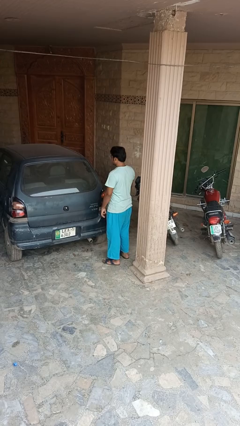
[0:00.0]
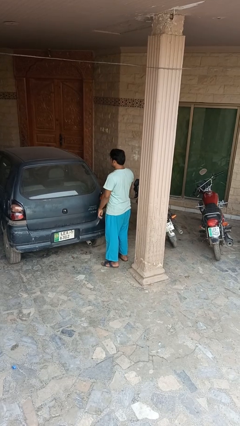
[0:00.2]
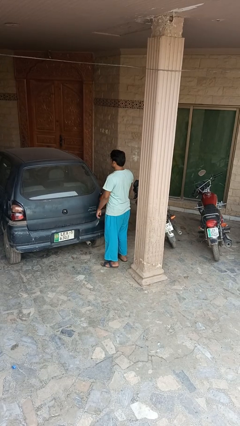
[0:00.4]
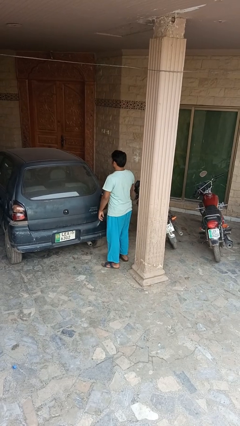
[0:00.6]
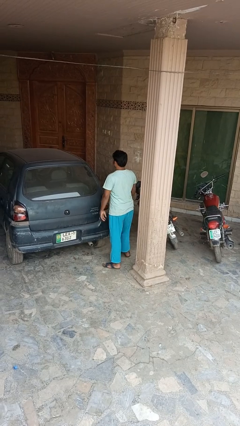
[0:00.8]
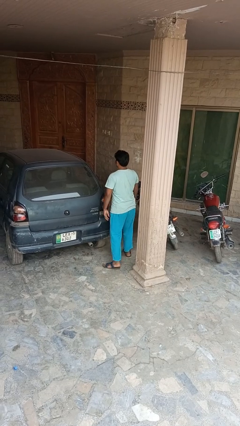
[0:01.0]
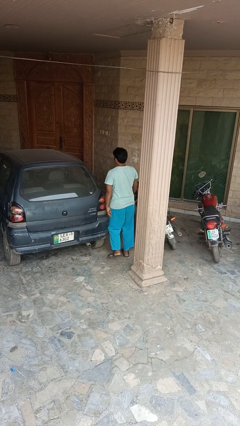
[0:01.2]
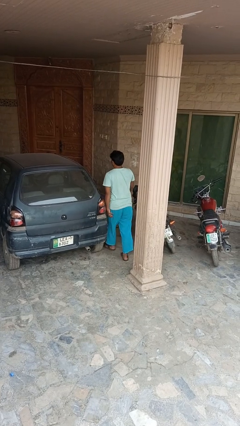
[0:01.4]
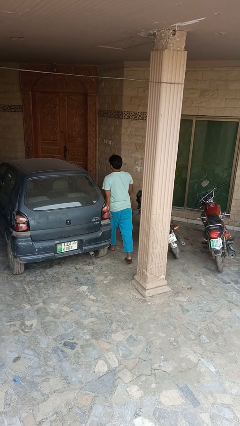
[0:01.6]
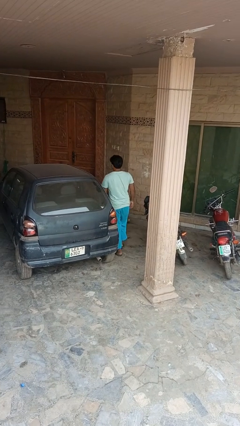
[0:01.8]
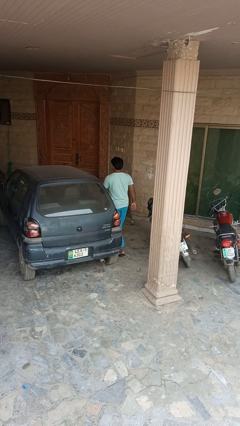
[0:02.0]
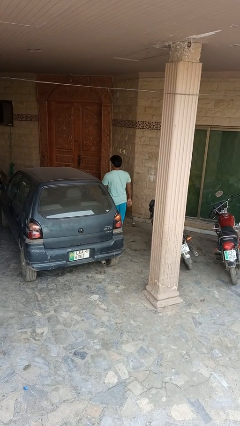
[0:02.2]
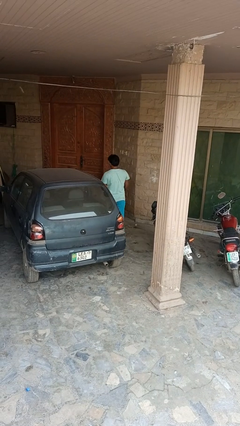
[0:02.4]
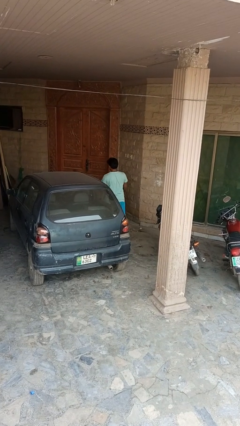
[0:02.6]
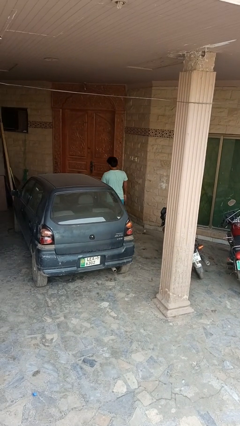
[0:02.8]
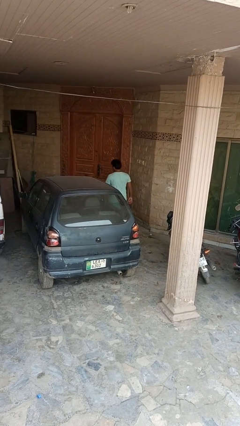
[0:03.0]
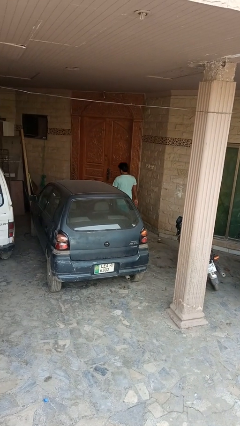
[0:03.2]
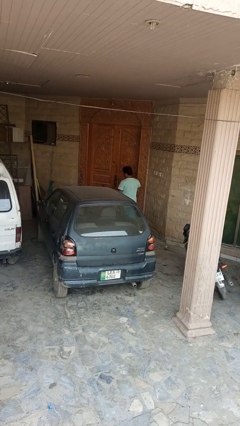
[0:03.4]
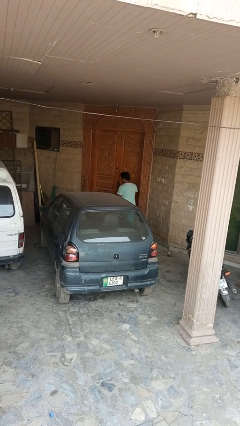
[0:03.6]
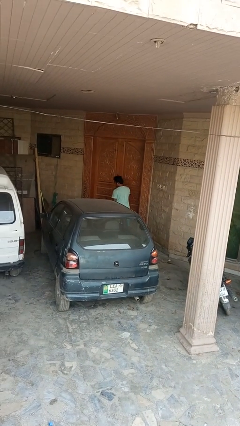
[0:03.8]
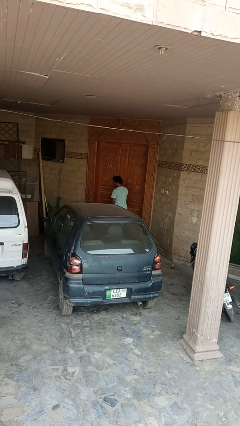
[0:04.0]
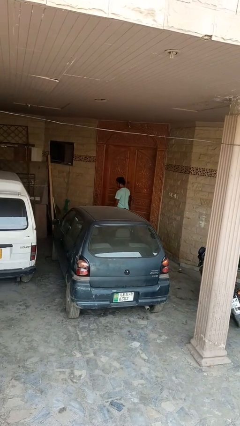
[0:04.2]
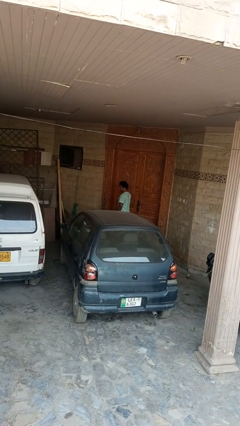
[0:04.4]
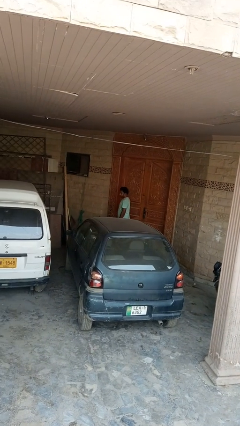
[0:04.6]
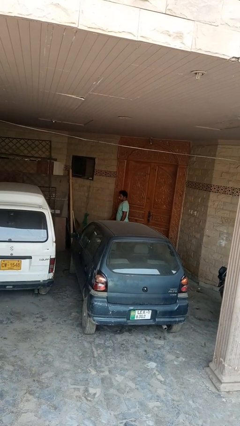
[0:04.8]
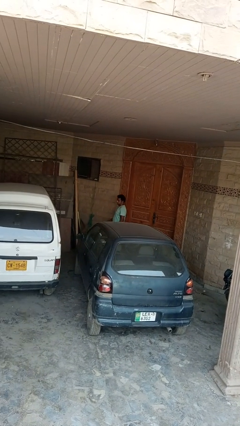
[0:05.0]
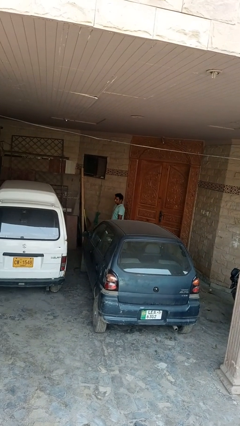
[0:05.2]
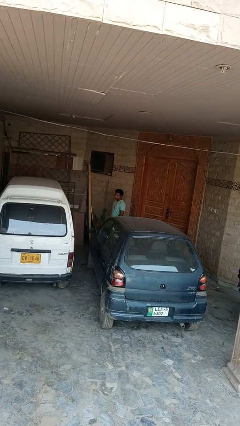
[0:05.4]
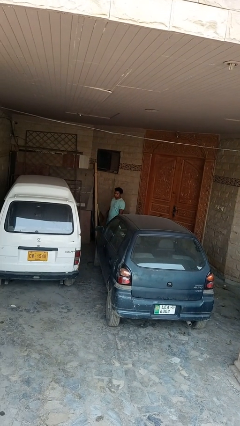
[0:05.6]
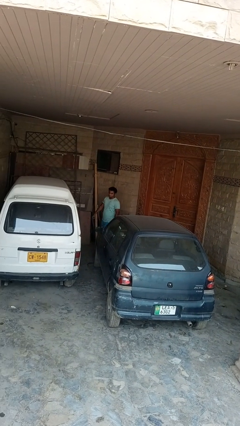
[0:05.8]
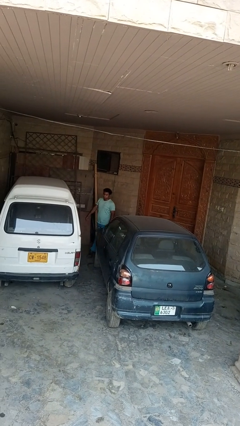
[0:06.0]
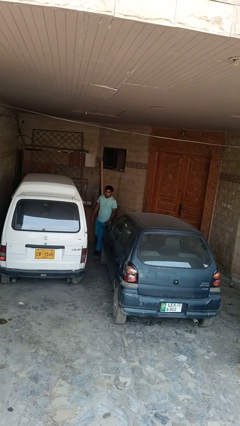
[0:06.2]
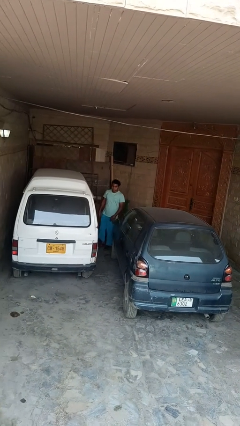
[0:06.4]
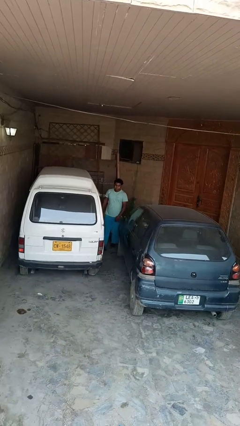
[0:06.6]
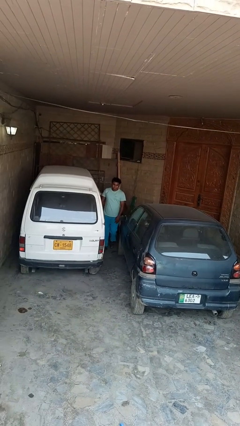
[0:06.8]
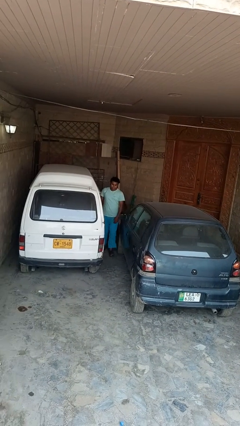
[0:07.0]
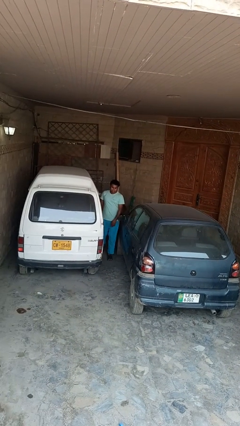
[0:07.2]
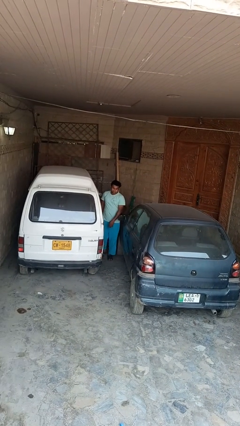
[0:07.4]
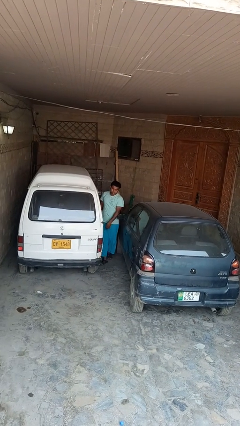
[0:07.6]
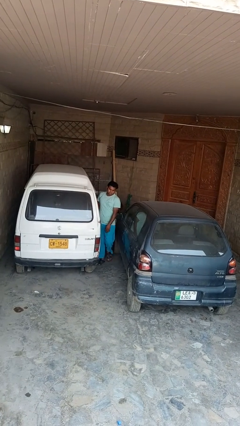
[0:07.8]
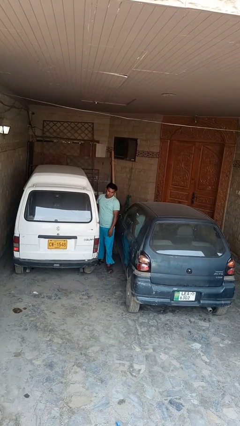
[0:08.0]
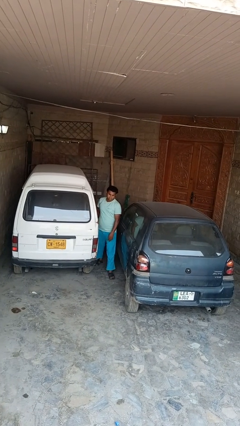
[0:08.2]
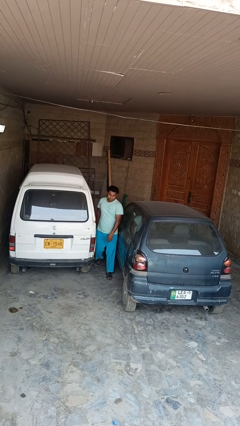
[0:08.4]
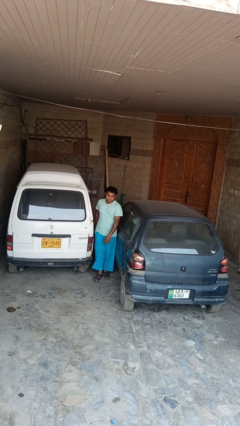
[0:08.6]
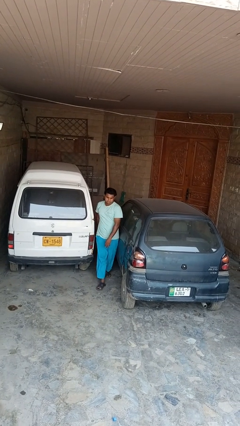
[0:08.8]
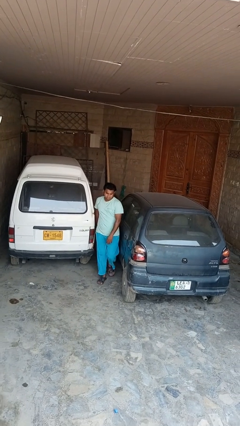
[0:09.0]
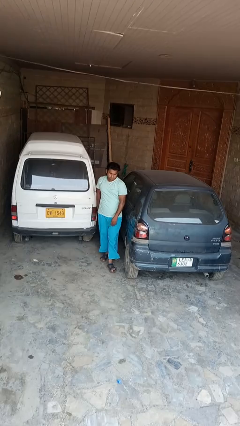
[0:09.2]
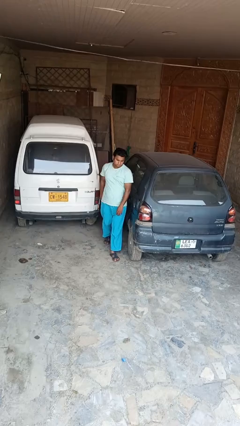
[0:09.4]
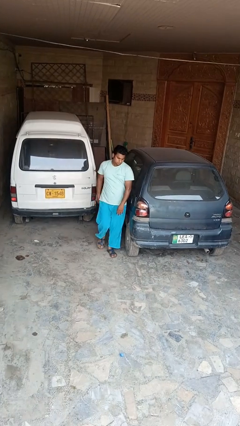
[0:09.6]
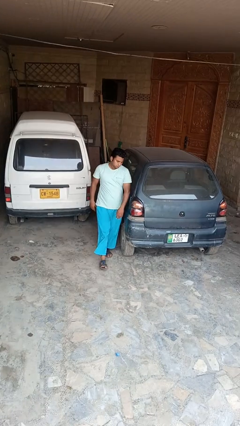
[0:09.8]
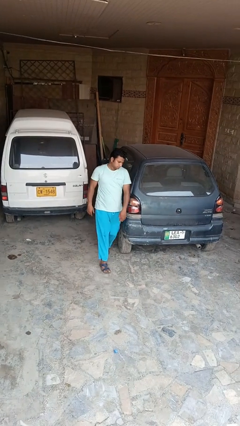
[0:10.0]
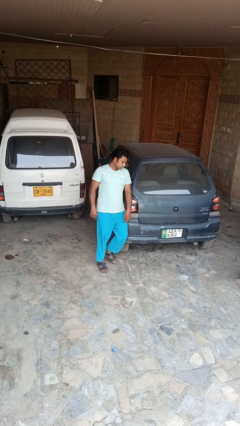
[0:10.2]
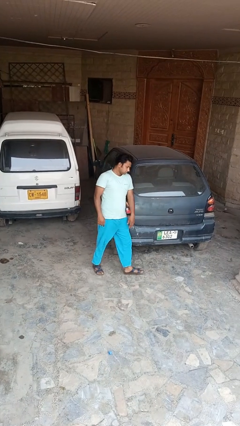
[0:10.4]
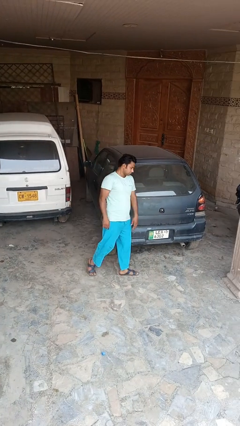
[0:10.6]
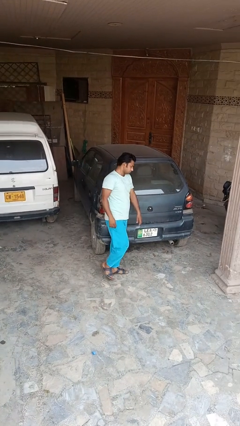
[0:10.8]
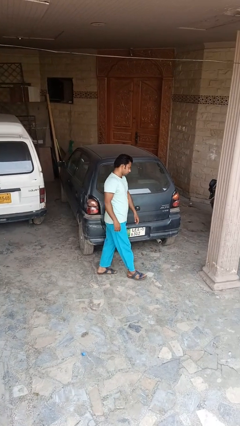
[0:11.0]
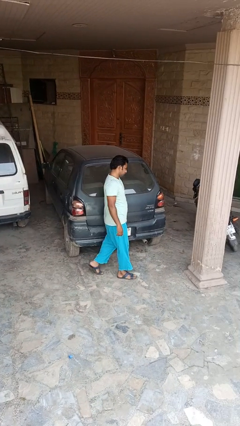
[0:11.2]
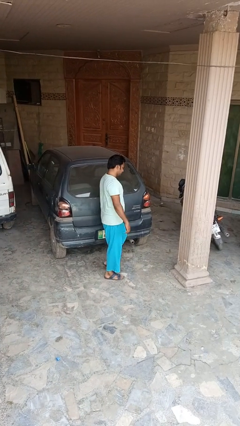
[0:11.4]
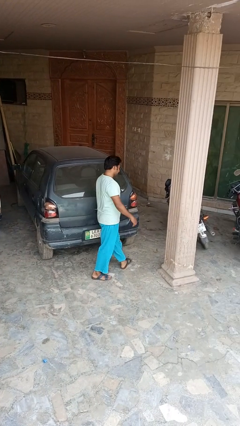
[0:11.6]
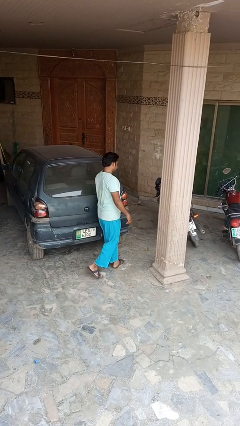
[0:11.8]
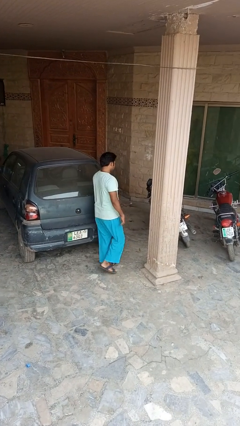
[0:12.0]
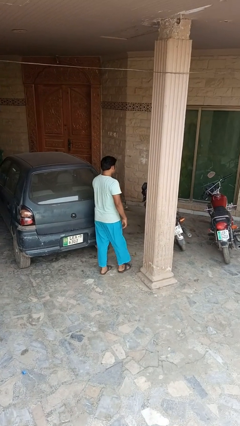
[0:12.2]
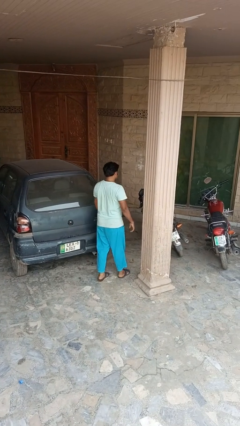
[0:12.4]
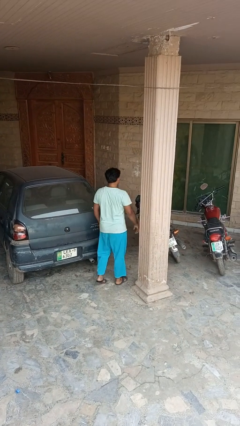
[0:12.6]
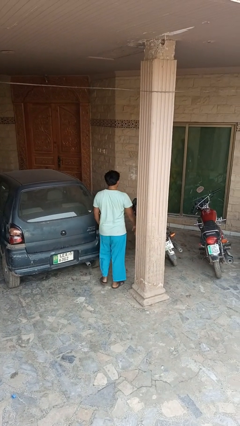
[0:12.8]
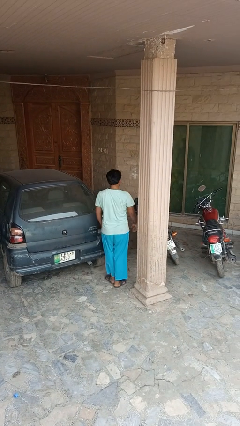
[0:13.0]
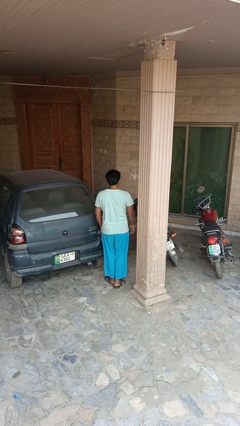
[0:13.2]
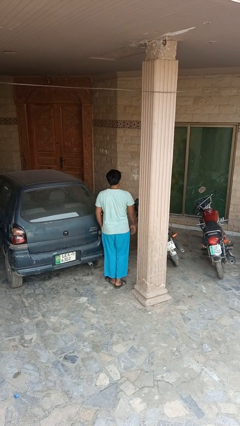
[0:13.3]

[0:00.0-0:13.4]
person walks around car

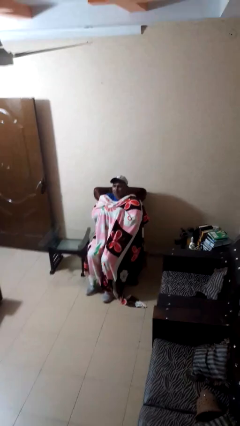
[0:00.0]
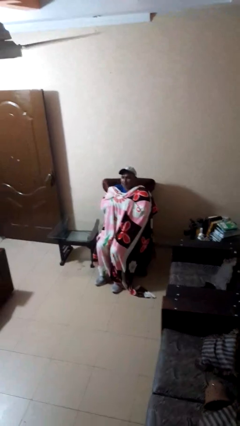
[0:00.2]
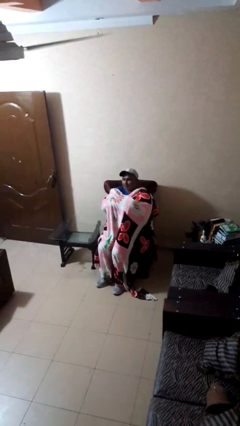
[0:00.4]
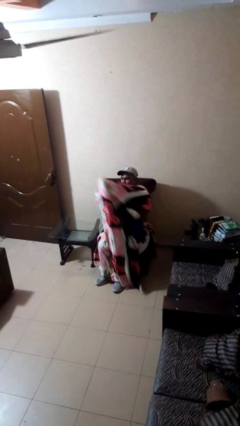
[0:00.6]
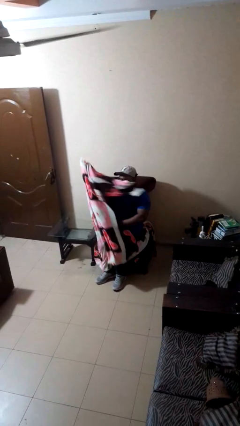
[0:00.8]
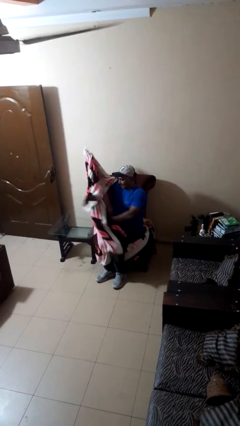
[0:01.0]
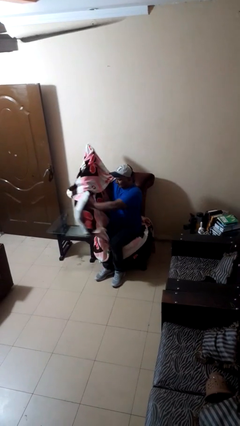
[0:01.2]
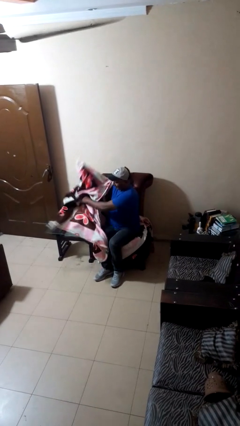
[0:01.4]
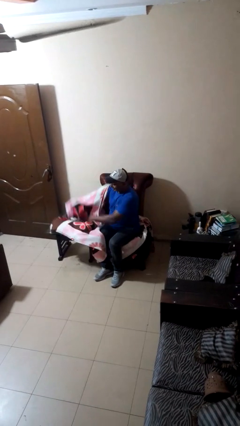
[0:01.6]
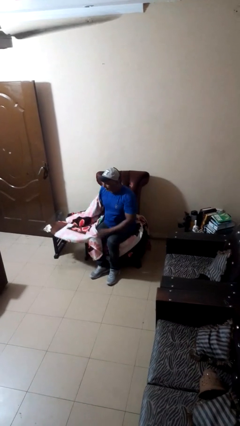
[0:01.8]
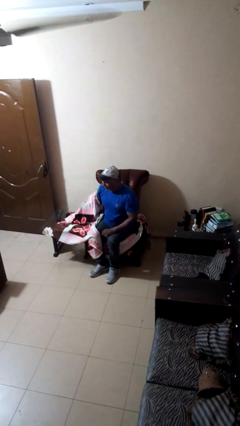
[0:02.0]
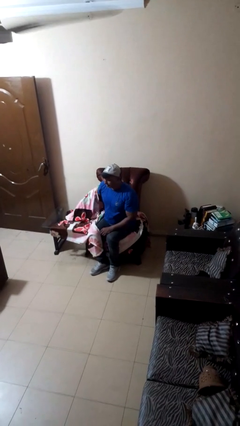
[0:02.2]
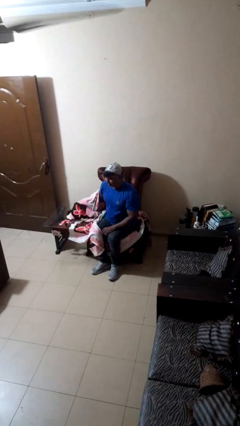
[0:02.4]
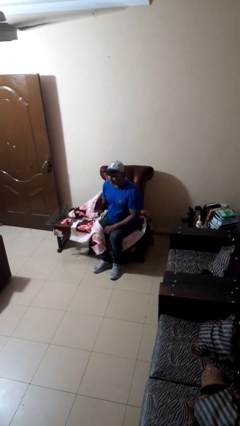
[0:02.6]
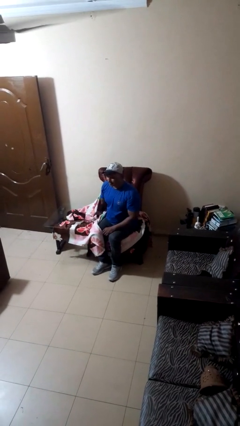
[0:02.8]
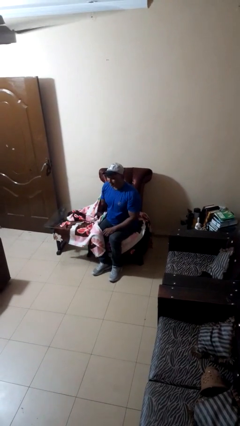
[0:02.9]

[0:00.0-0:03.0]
person uncovers with blanket

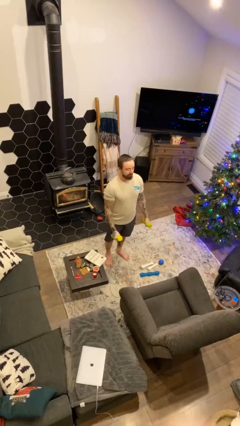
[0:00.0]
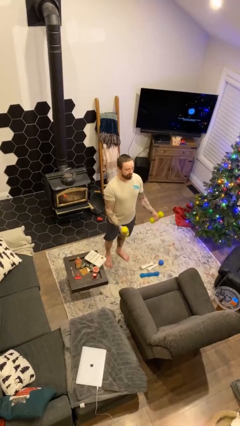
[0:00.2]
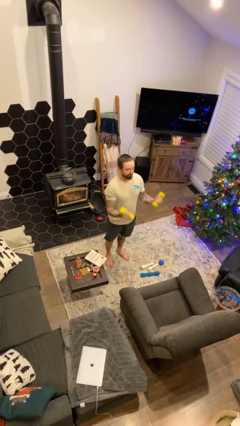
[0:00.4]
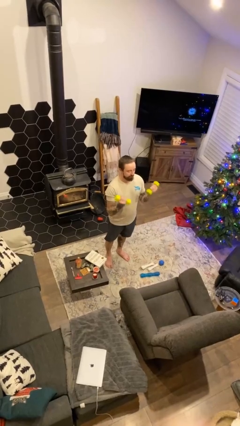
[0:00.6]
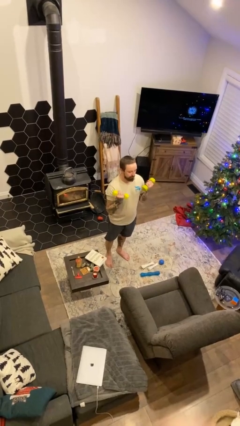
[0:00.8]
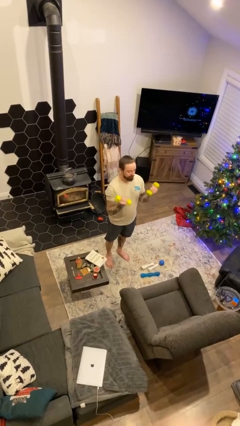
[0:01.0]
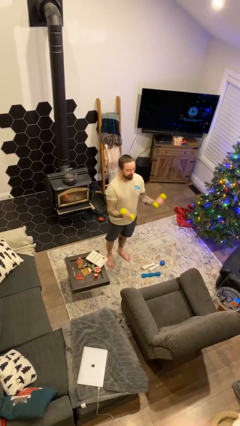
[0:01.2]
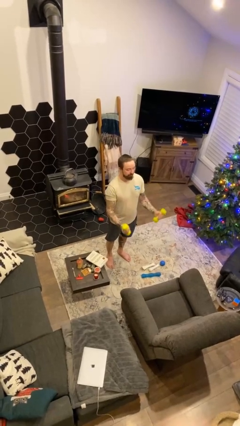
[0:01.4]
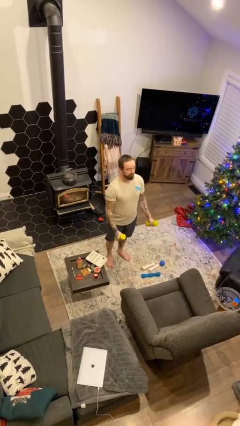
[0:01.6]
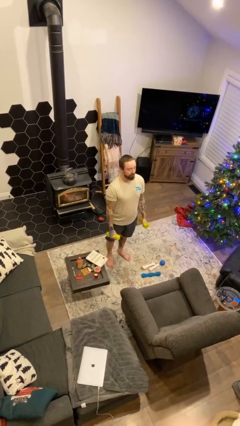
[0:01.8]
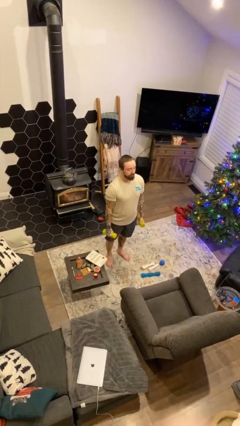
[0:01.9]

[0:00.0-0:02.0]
person lifts dumbbells

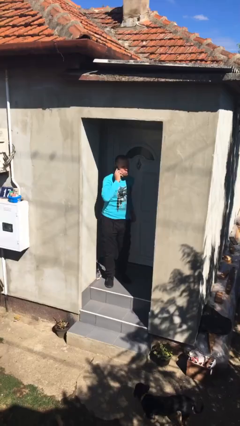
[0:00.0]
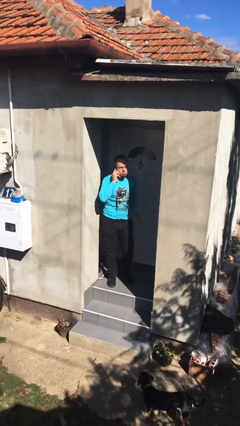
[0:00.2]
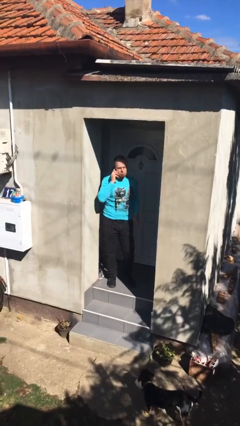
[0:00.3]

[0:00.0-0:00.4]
person closes facility door
